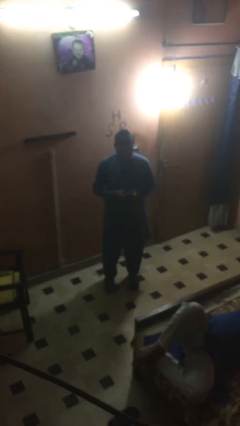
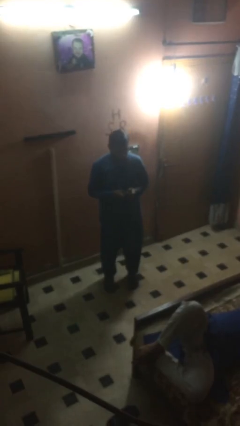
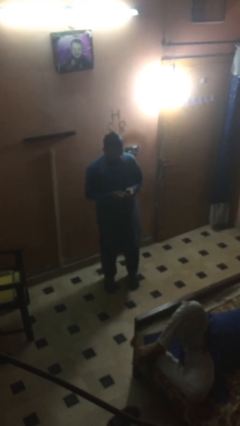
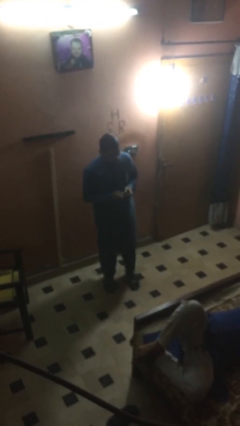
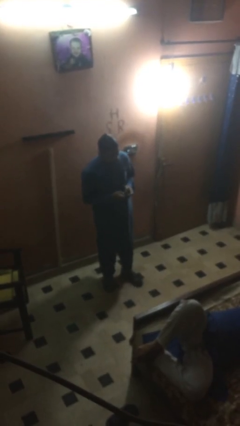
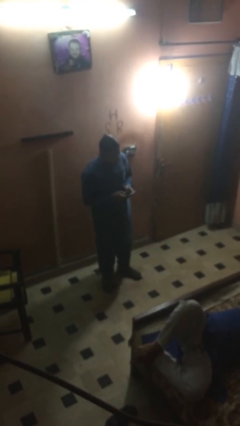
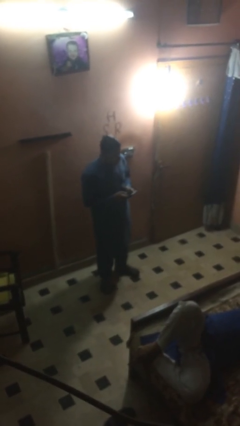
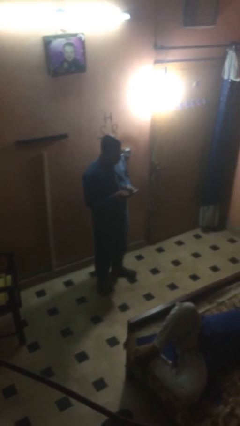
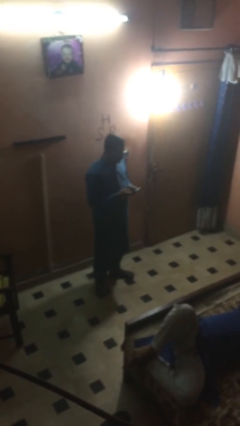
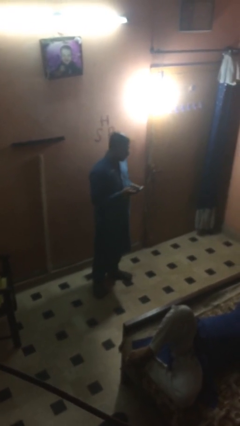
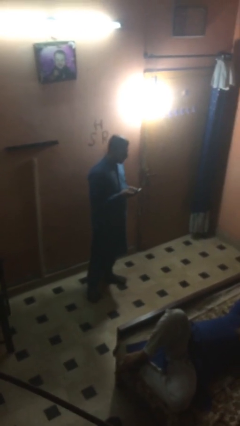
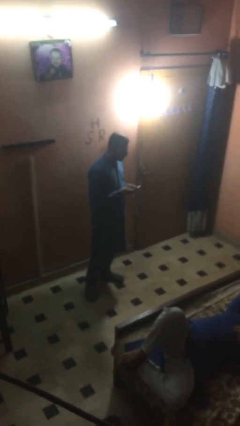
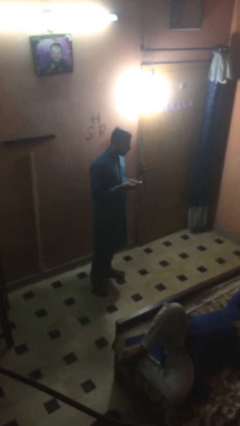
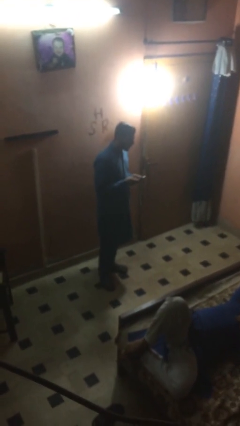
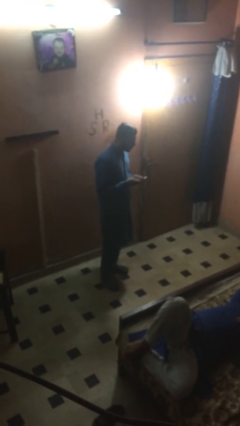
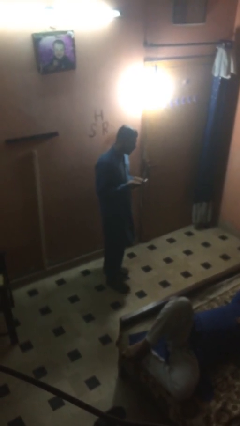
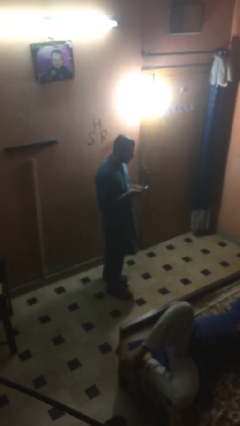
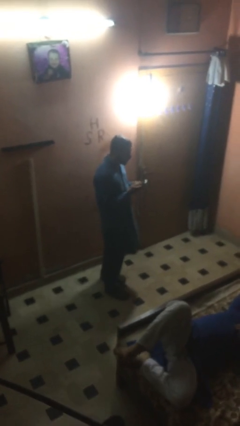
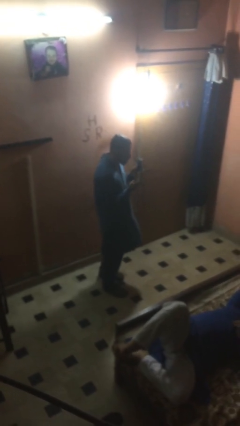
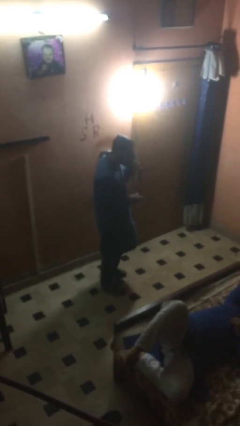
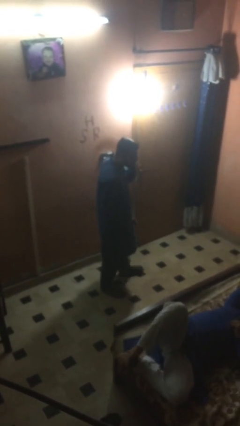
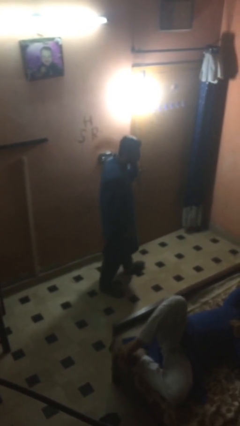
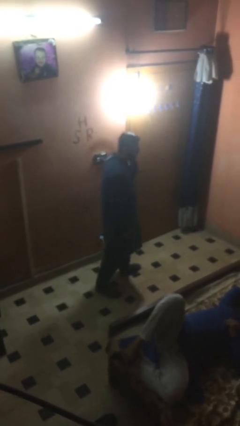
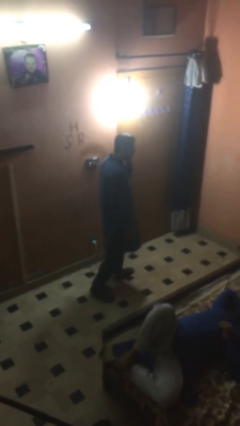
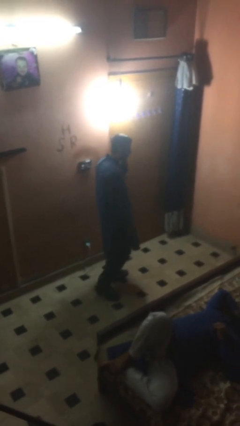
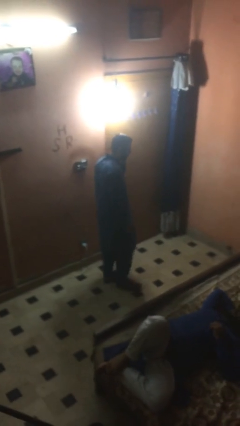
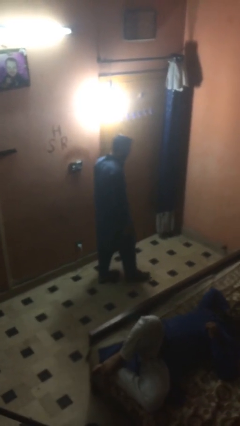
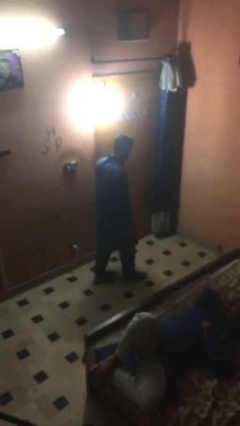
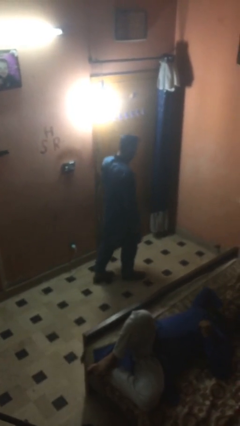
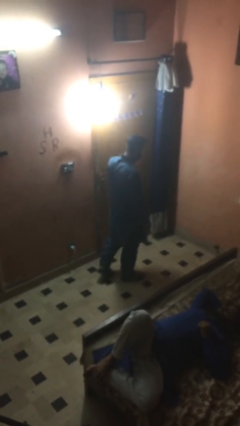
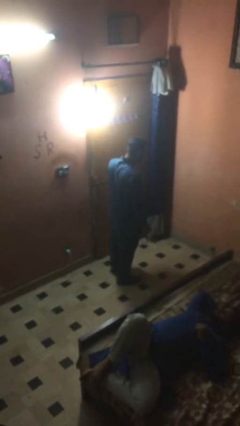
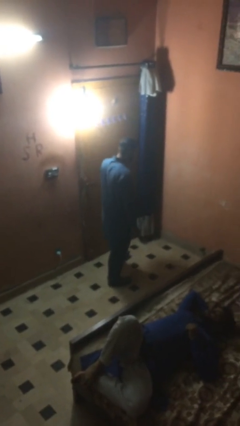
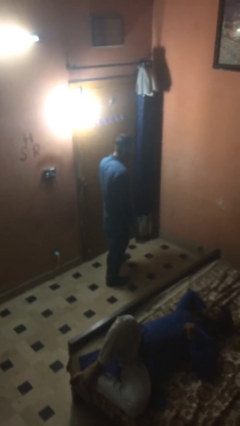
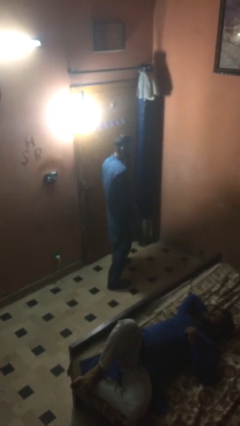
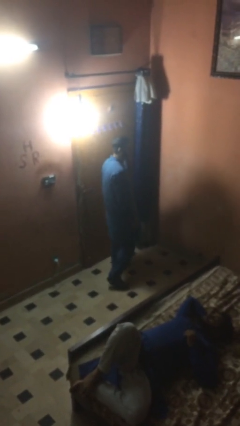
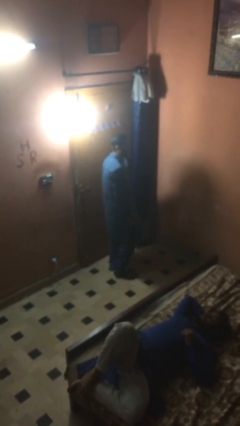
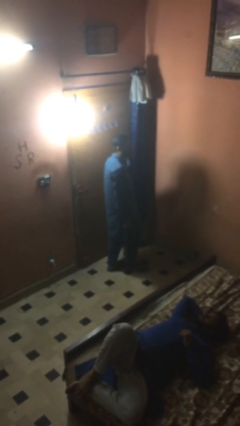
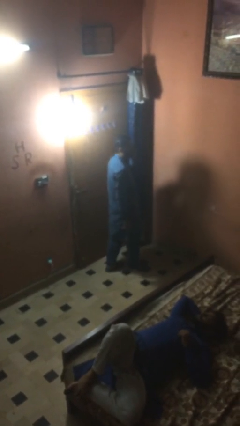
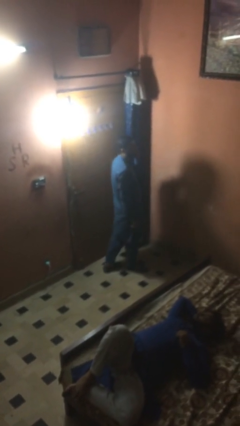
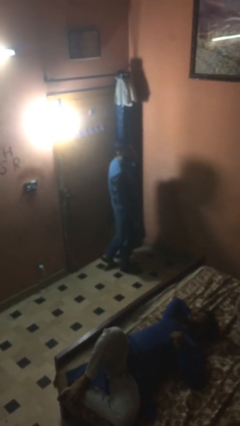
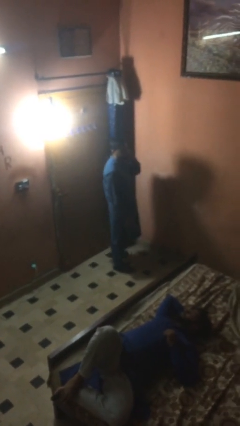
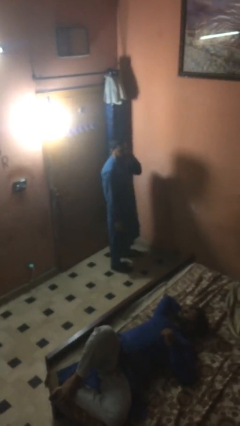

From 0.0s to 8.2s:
person talks on phone

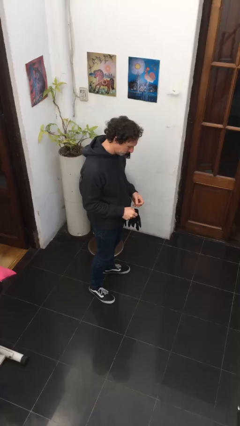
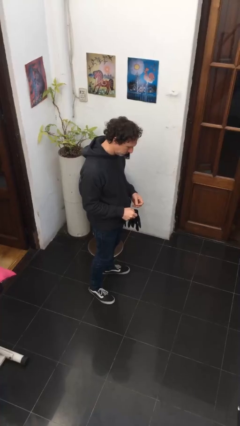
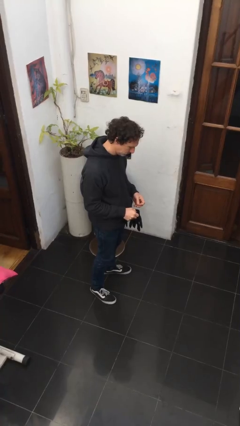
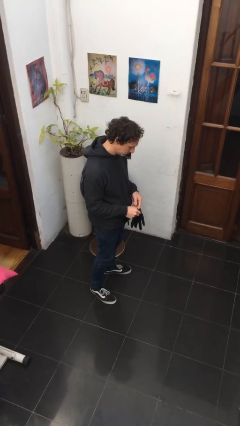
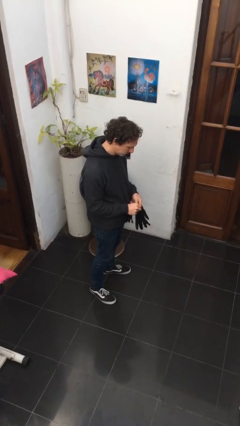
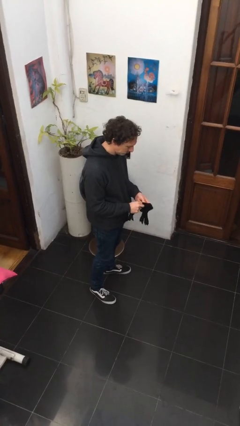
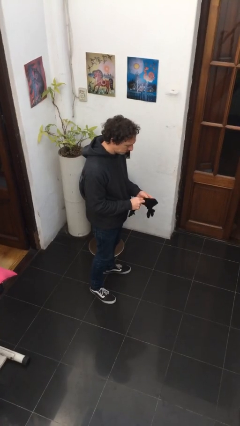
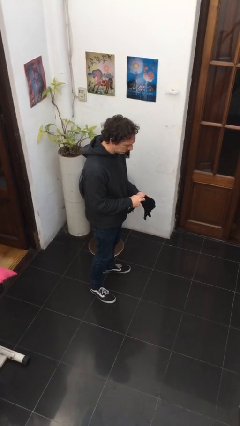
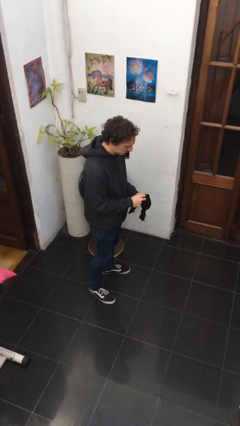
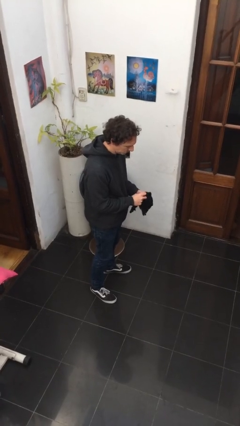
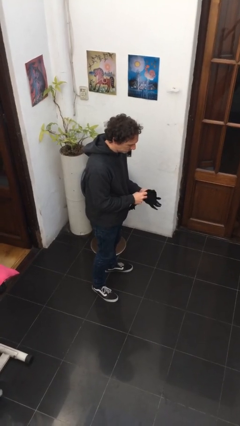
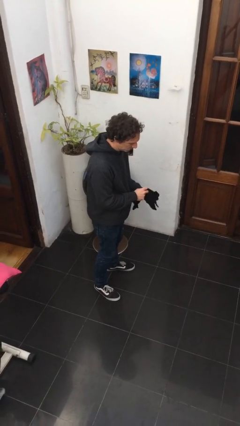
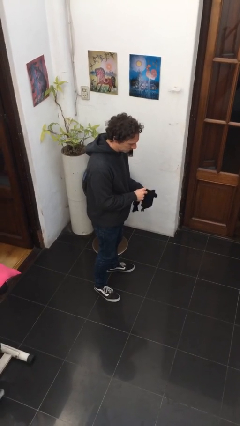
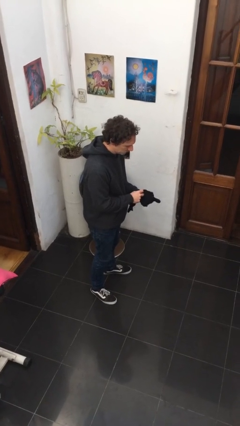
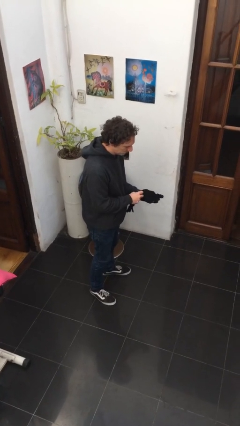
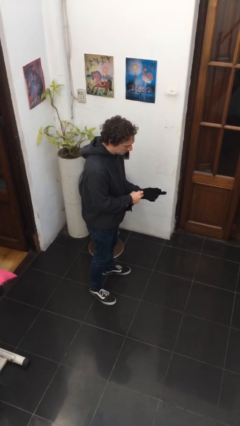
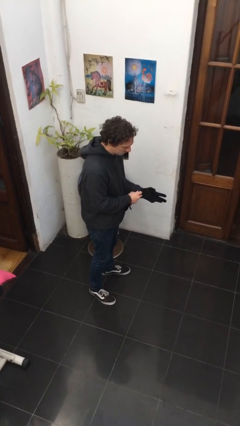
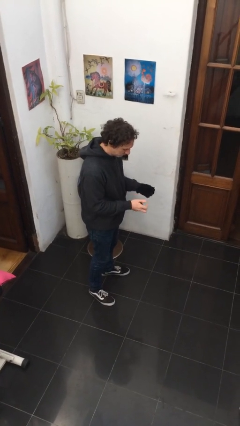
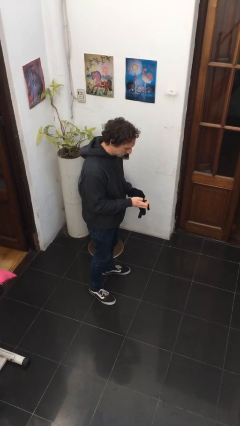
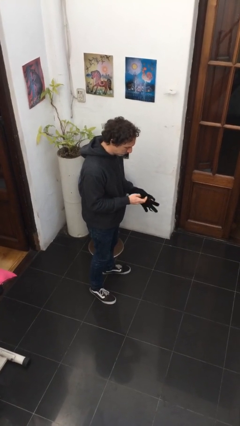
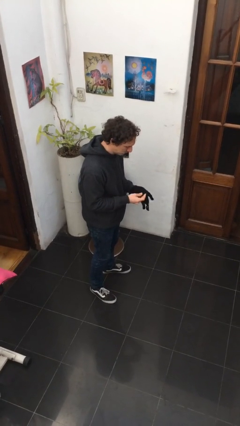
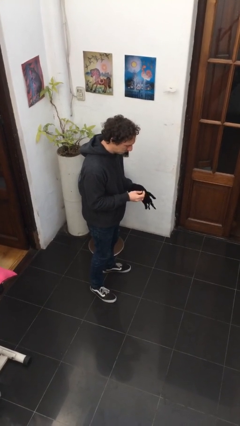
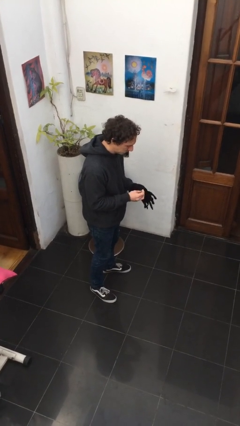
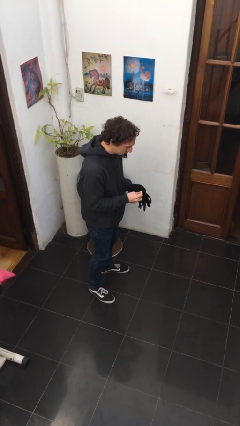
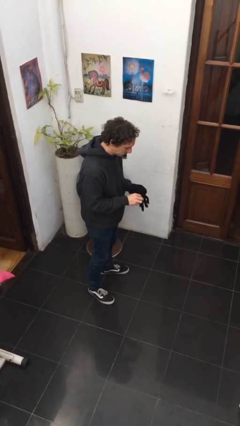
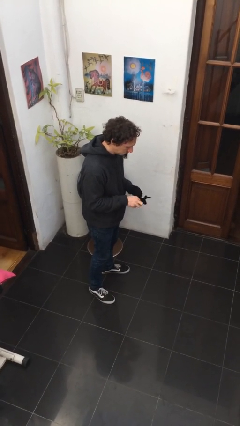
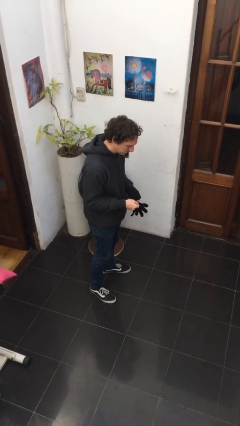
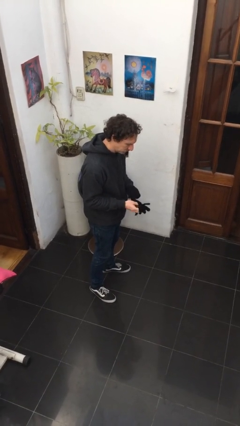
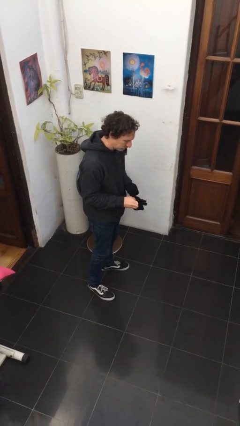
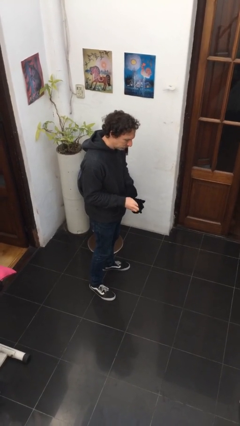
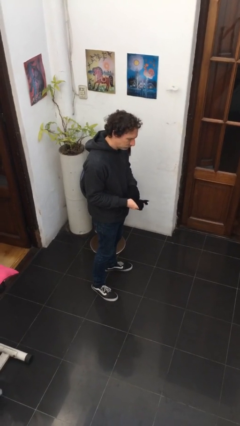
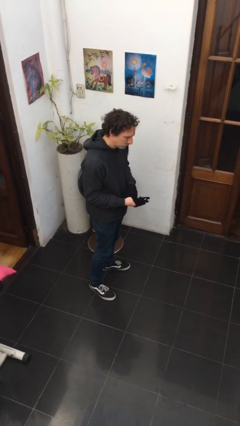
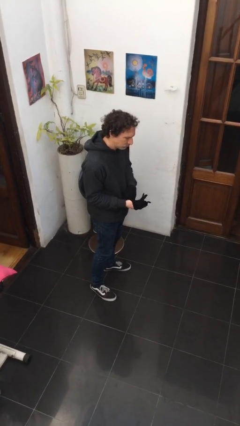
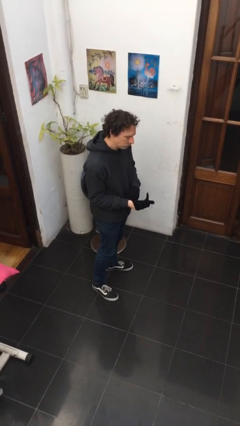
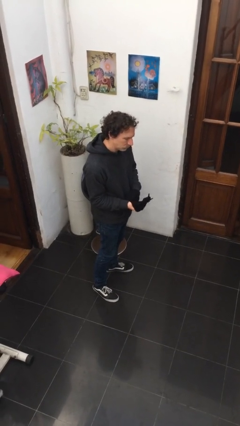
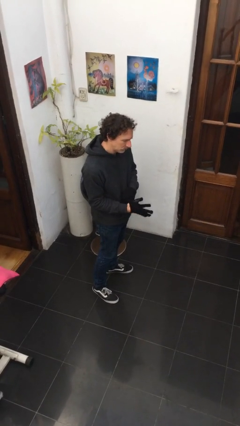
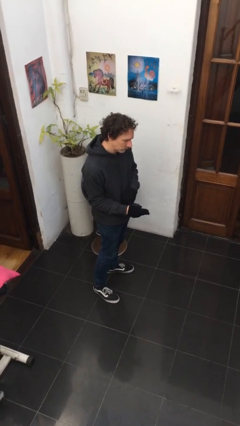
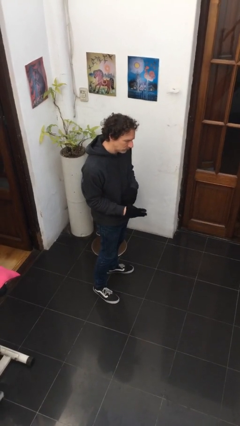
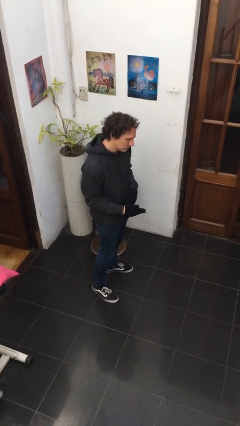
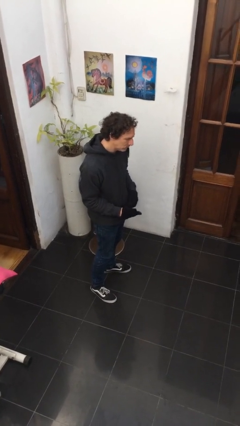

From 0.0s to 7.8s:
person puts on gloves

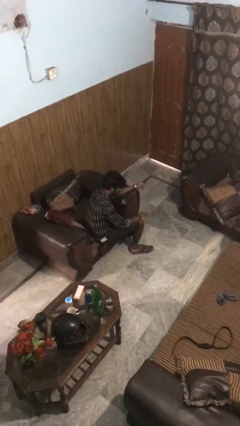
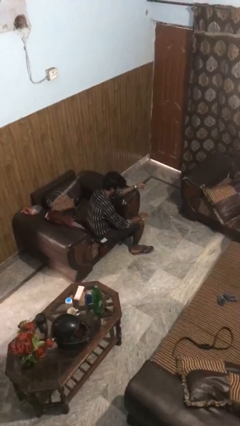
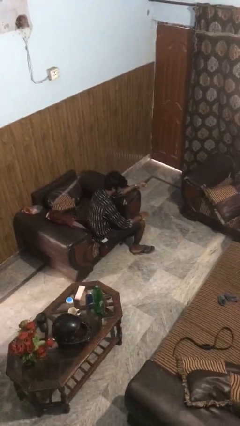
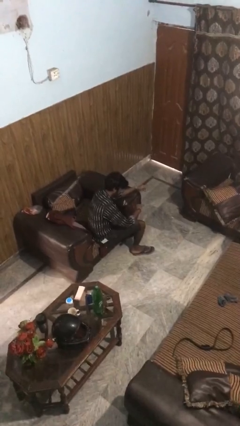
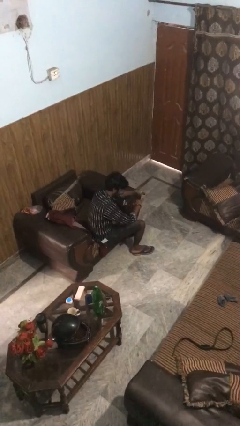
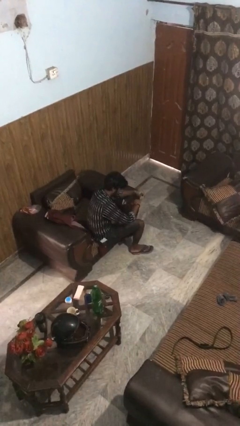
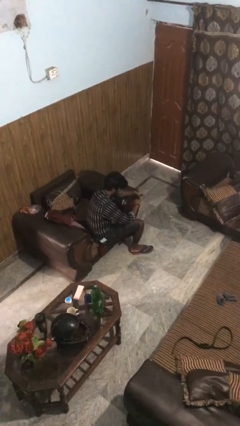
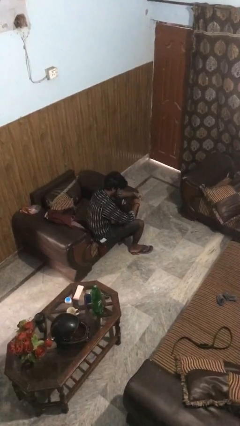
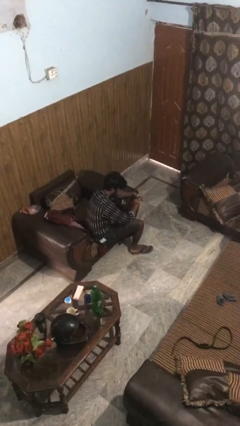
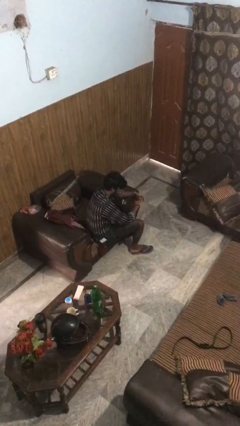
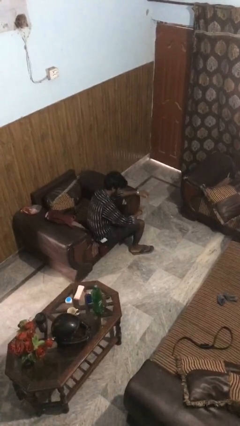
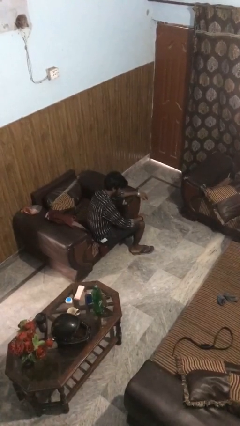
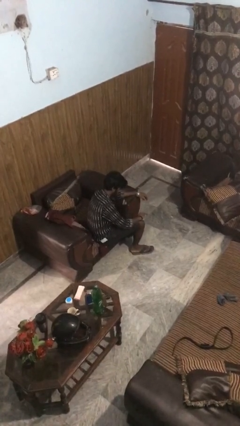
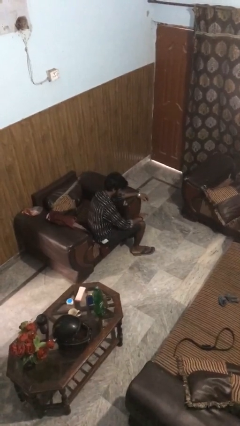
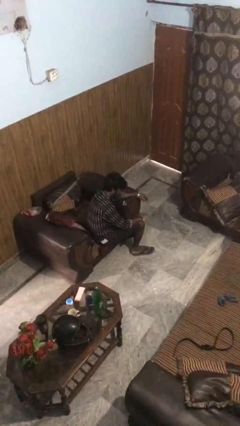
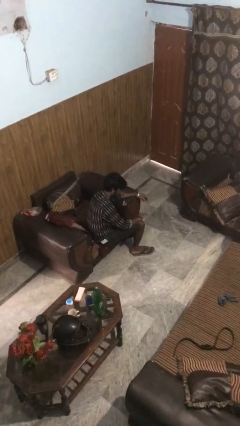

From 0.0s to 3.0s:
person puts on ring
